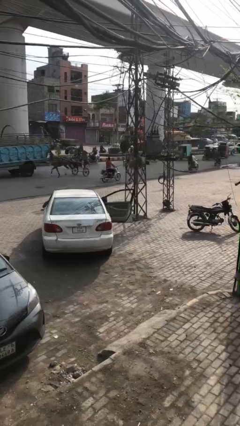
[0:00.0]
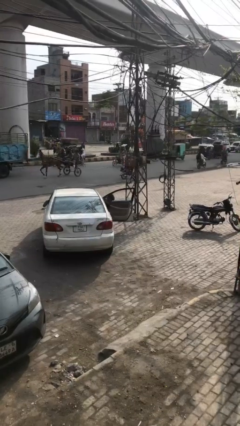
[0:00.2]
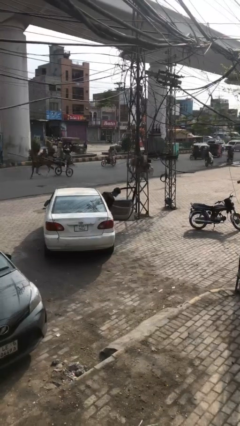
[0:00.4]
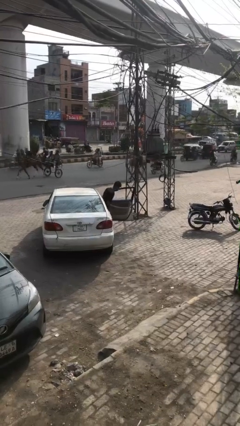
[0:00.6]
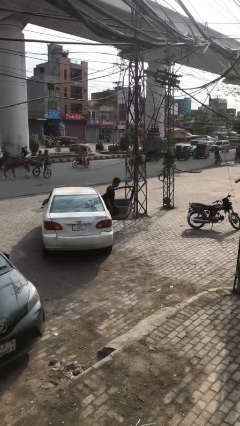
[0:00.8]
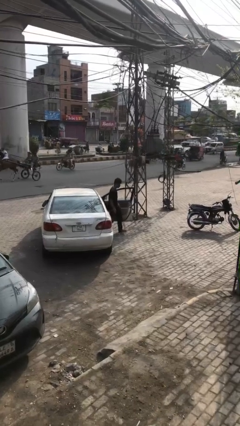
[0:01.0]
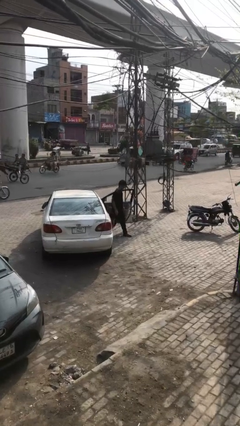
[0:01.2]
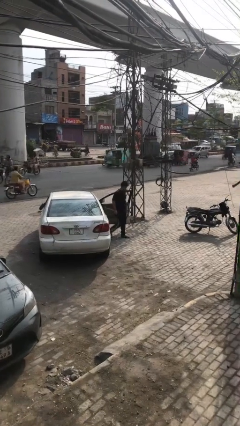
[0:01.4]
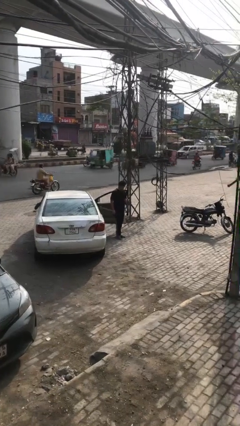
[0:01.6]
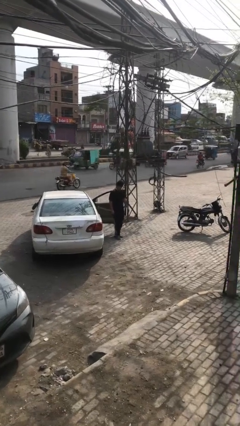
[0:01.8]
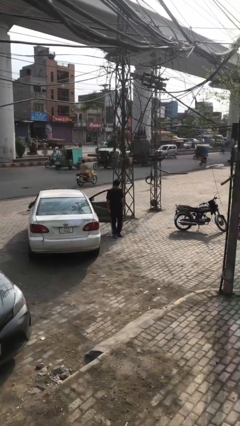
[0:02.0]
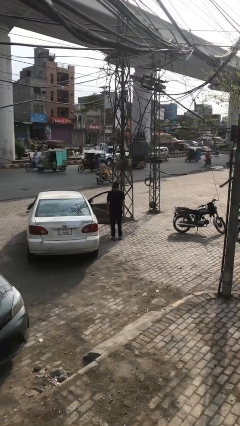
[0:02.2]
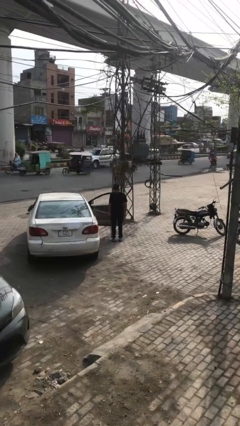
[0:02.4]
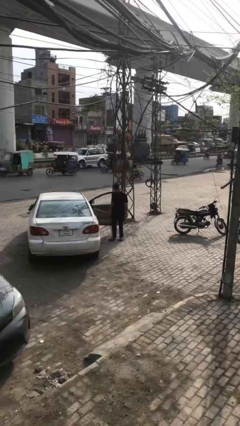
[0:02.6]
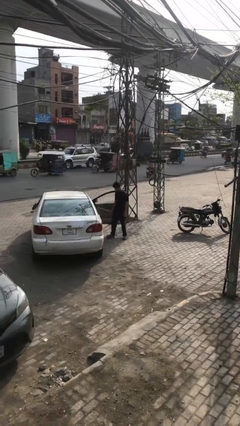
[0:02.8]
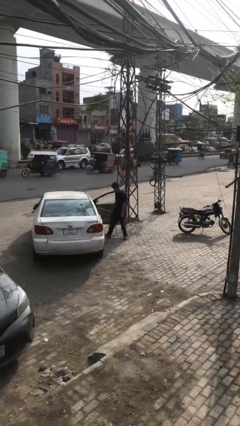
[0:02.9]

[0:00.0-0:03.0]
person exits car

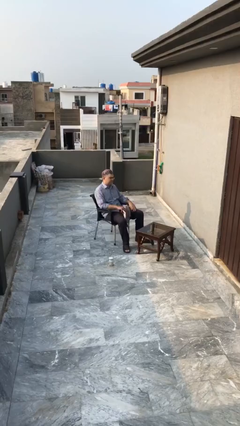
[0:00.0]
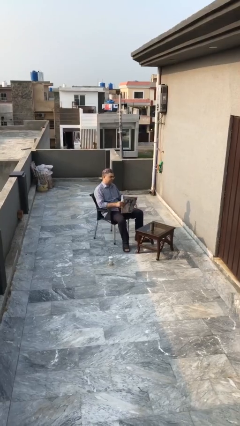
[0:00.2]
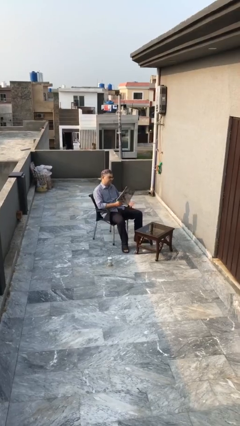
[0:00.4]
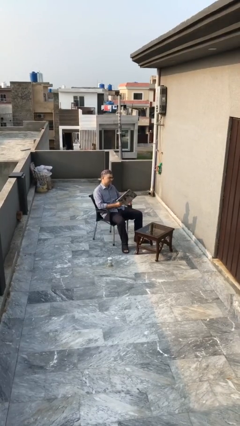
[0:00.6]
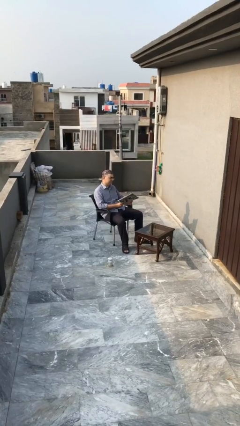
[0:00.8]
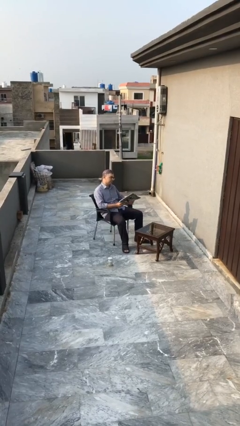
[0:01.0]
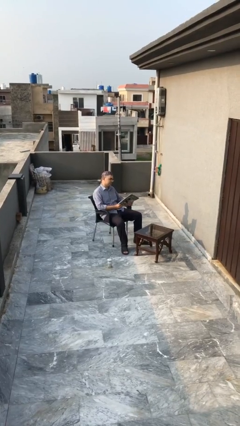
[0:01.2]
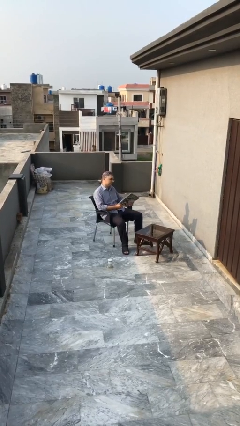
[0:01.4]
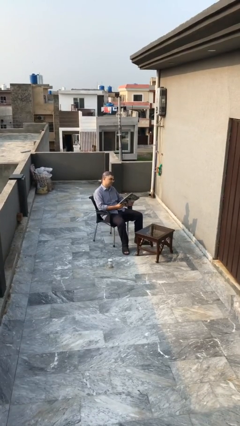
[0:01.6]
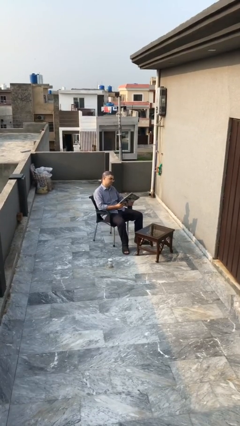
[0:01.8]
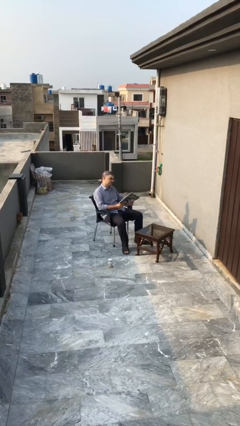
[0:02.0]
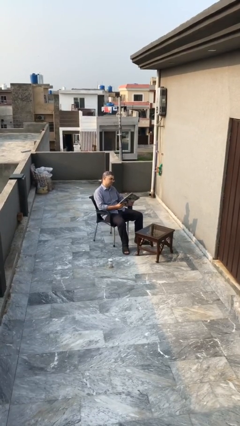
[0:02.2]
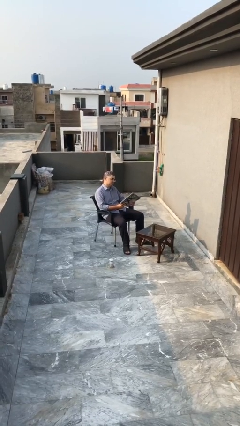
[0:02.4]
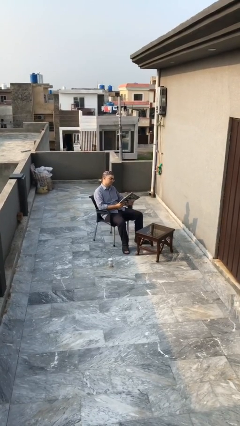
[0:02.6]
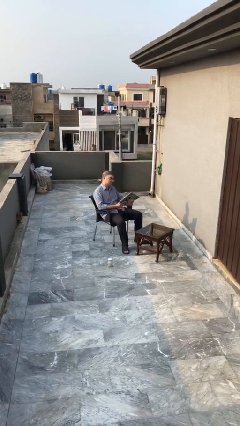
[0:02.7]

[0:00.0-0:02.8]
person reads document

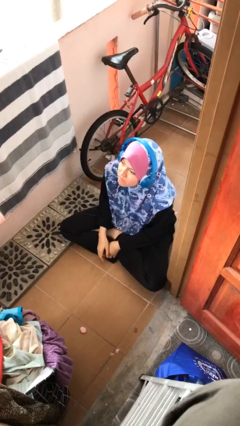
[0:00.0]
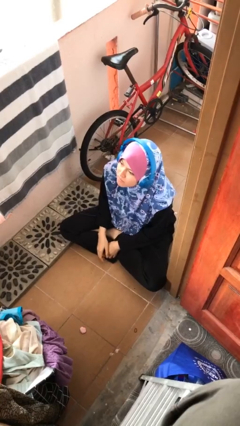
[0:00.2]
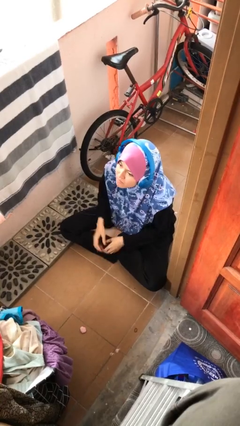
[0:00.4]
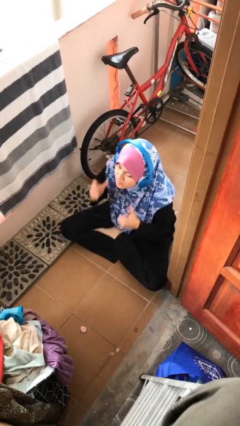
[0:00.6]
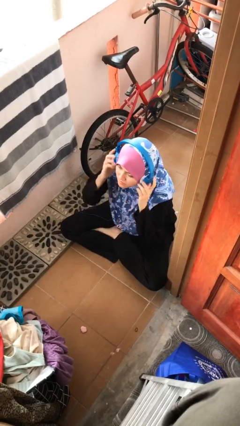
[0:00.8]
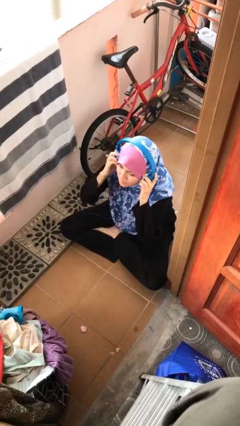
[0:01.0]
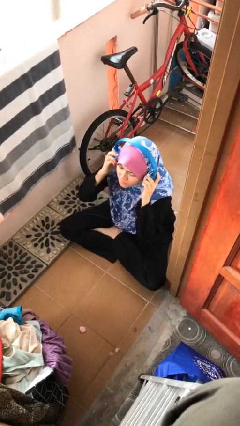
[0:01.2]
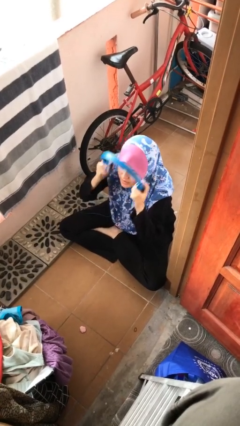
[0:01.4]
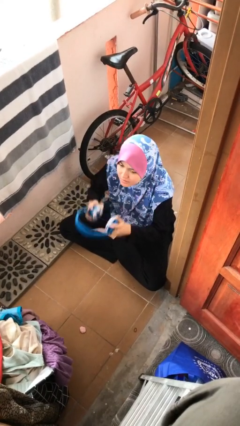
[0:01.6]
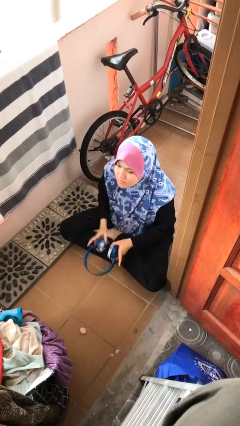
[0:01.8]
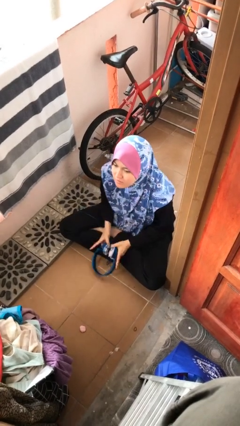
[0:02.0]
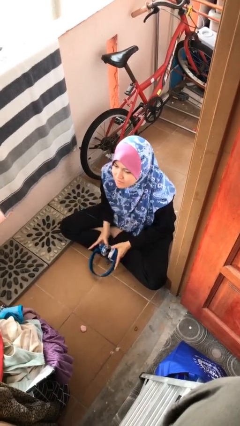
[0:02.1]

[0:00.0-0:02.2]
person takes off headphones

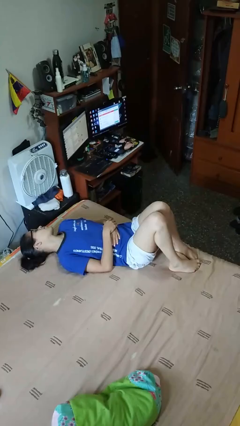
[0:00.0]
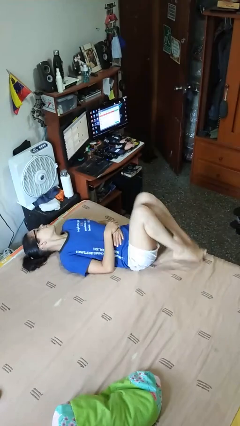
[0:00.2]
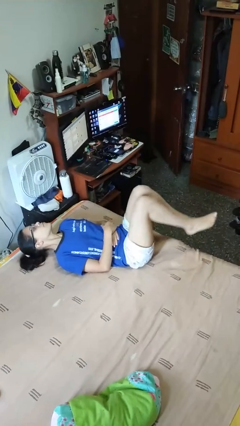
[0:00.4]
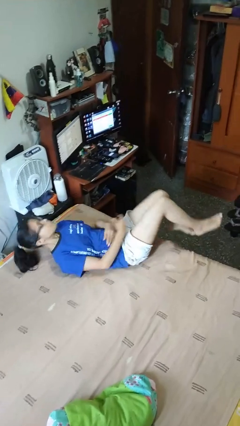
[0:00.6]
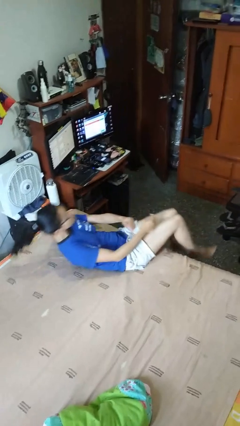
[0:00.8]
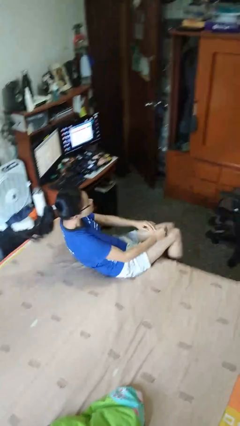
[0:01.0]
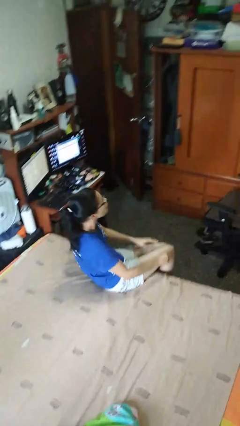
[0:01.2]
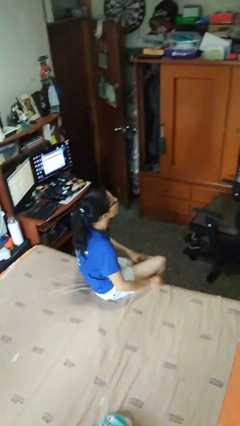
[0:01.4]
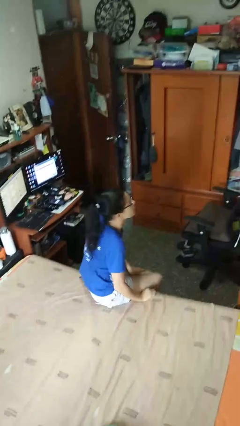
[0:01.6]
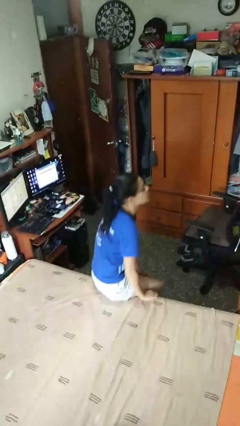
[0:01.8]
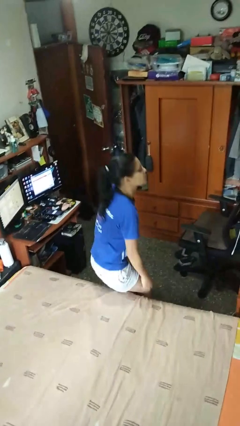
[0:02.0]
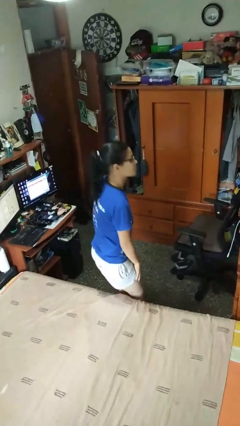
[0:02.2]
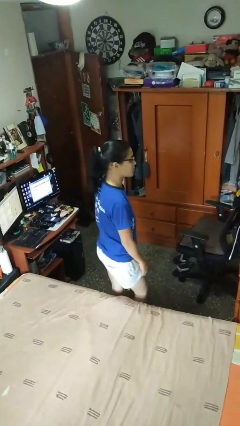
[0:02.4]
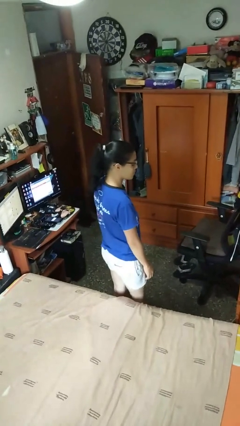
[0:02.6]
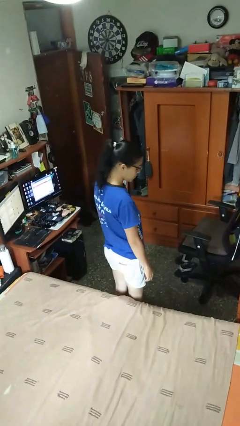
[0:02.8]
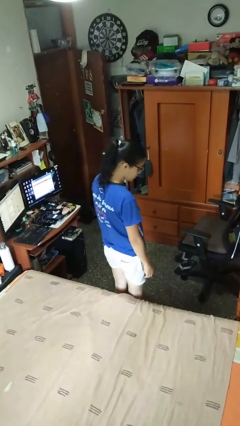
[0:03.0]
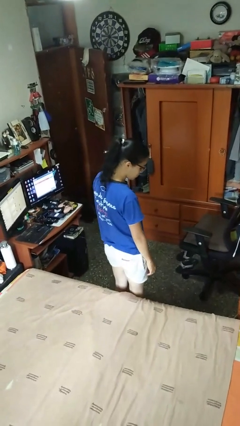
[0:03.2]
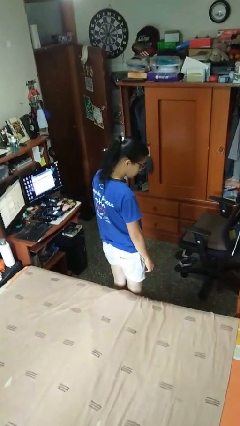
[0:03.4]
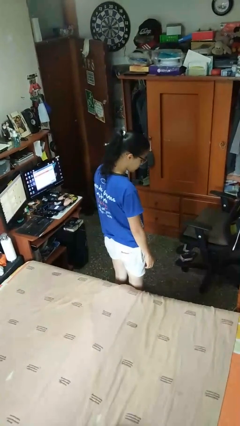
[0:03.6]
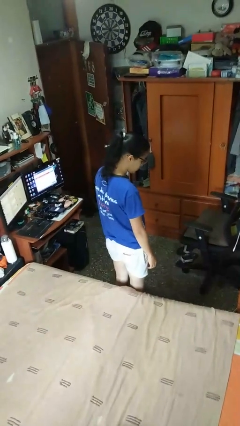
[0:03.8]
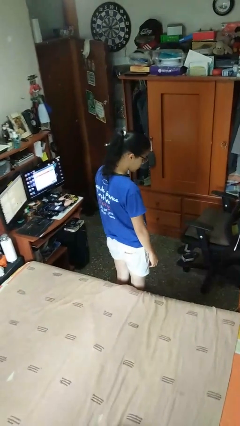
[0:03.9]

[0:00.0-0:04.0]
person stands up

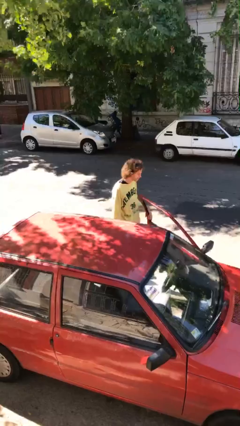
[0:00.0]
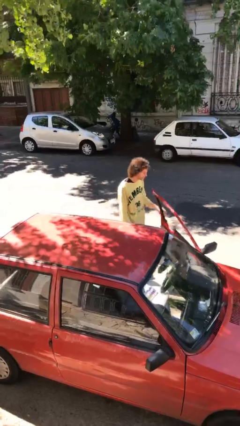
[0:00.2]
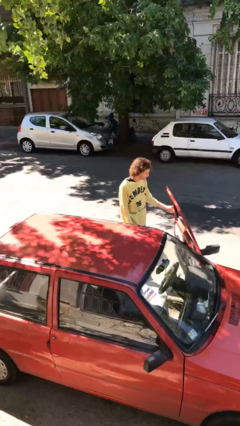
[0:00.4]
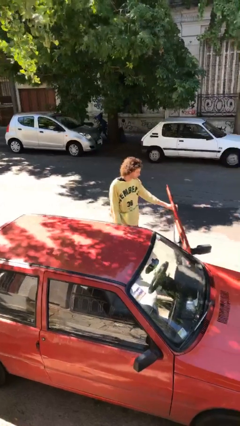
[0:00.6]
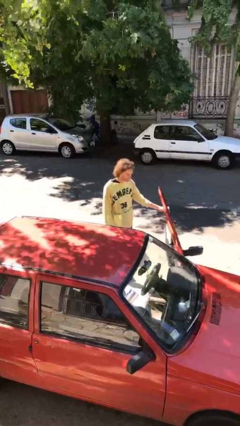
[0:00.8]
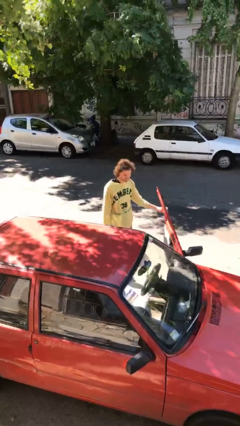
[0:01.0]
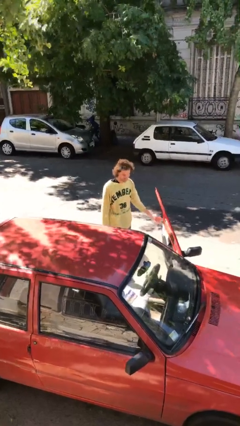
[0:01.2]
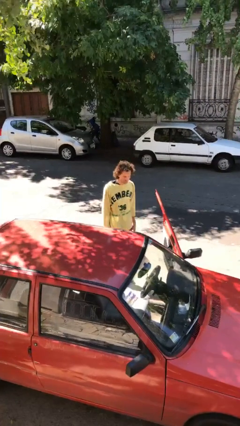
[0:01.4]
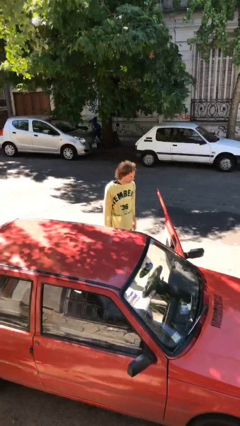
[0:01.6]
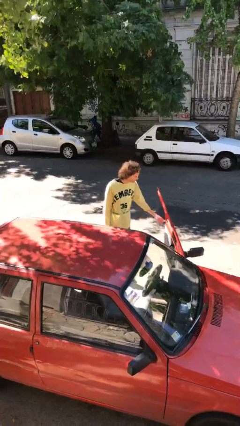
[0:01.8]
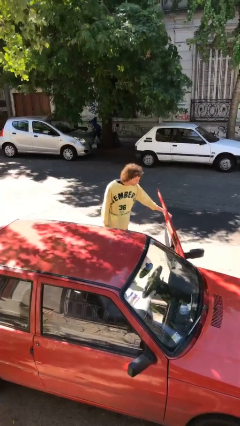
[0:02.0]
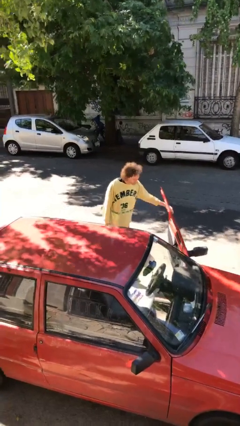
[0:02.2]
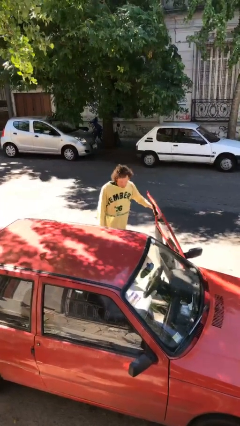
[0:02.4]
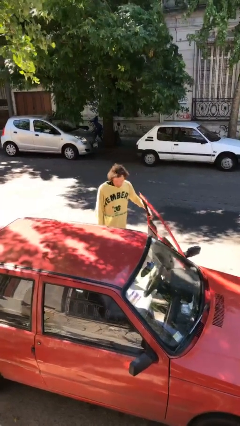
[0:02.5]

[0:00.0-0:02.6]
person opens car door

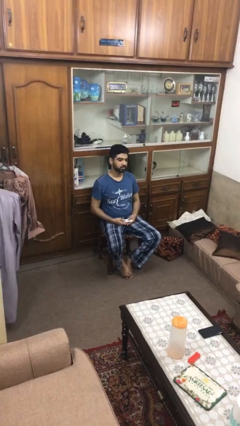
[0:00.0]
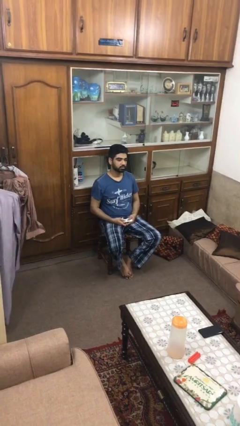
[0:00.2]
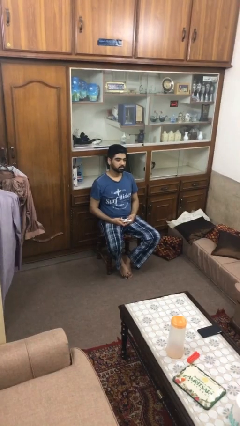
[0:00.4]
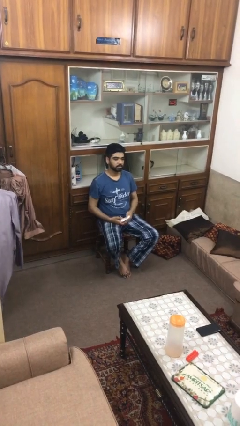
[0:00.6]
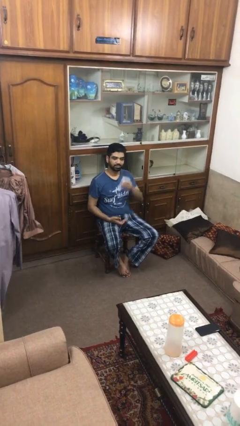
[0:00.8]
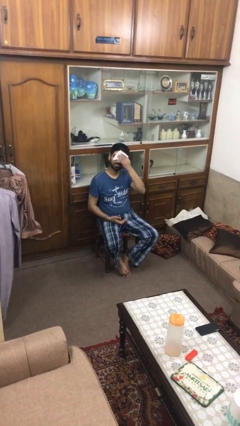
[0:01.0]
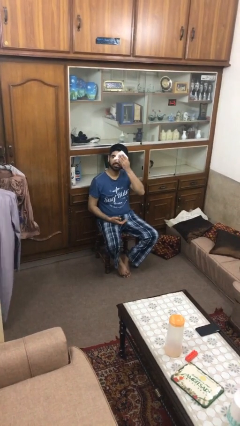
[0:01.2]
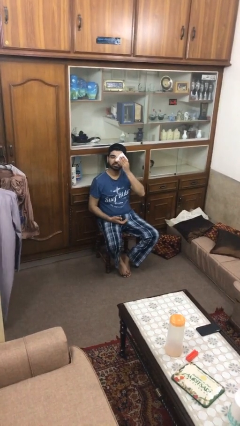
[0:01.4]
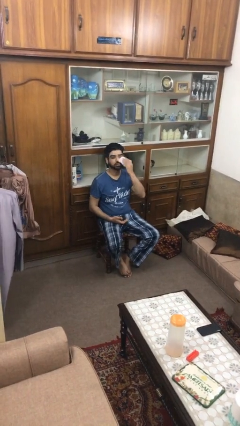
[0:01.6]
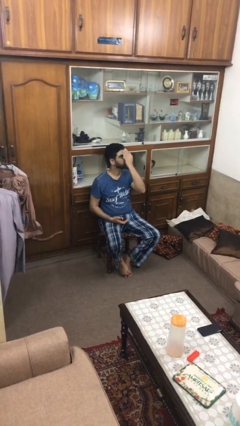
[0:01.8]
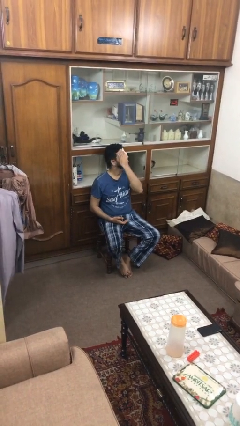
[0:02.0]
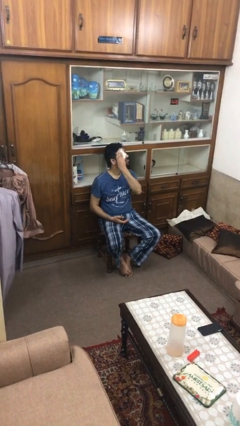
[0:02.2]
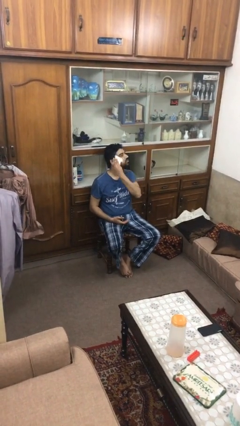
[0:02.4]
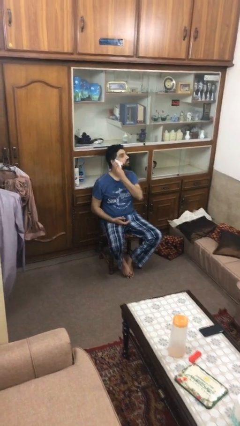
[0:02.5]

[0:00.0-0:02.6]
person wipes mouth with napkin
